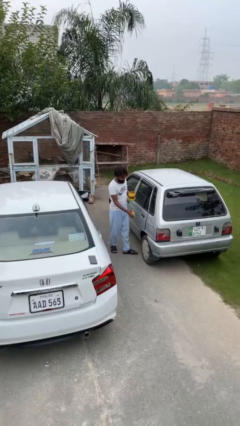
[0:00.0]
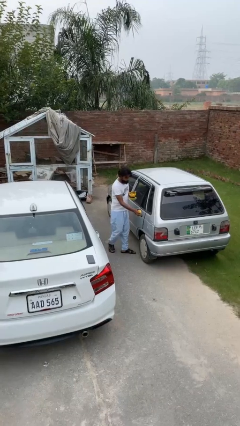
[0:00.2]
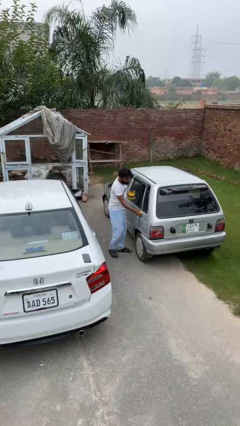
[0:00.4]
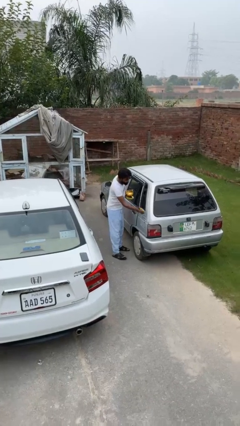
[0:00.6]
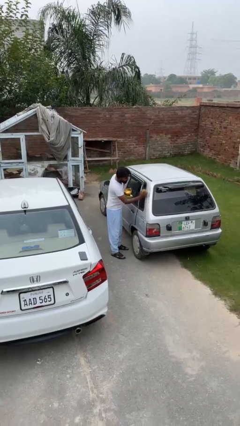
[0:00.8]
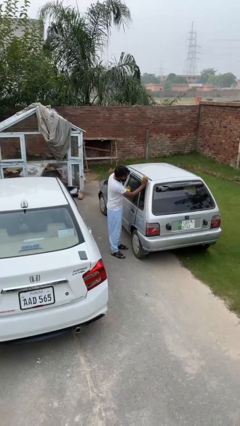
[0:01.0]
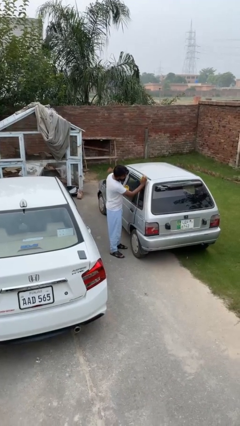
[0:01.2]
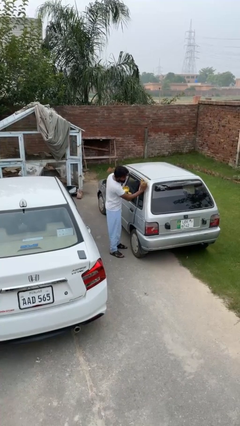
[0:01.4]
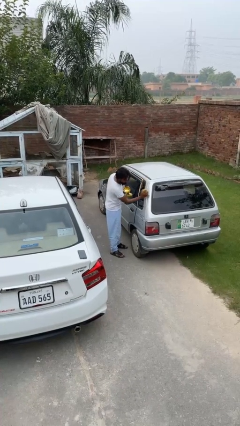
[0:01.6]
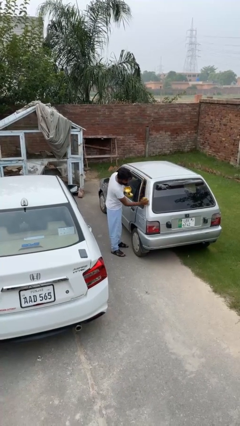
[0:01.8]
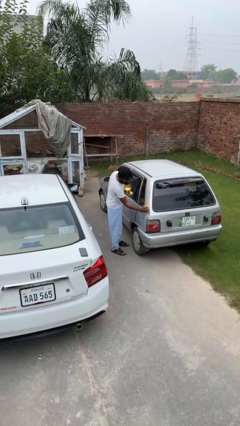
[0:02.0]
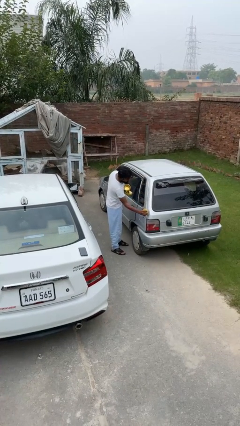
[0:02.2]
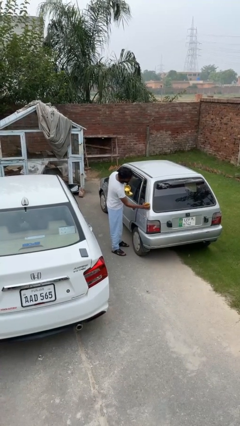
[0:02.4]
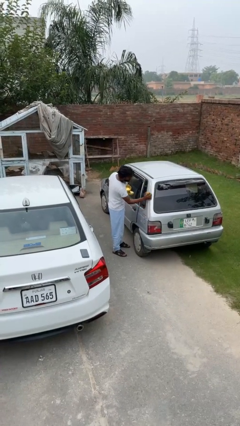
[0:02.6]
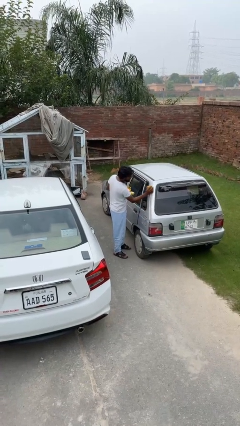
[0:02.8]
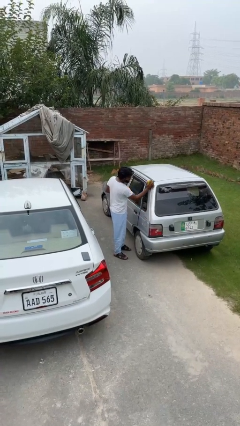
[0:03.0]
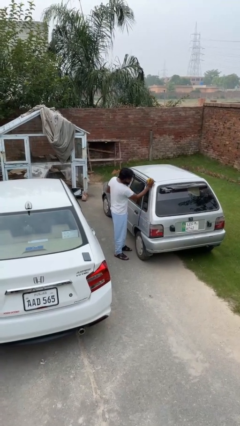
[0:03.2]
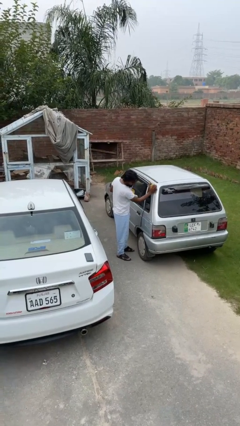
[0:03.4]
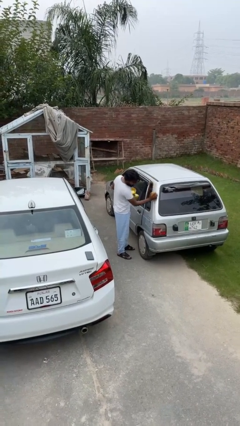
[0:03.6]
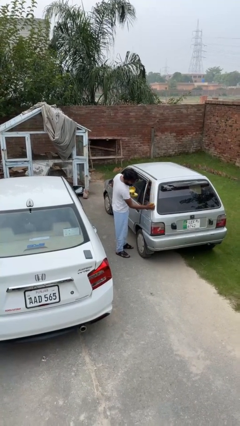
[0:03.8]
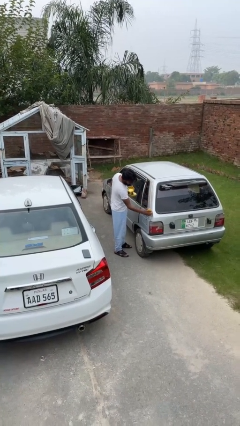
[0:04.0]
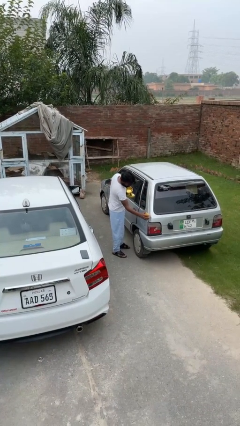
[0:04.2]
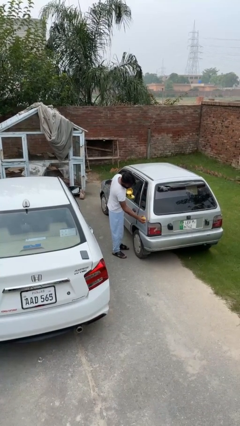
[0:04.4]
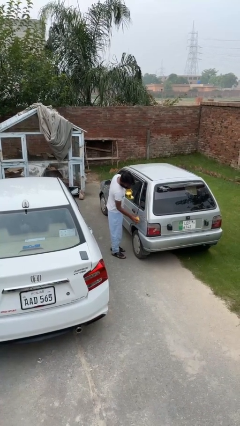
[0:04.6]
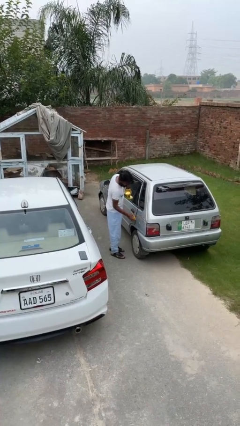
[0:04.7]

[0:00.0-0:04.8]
person polishes car with rag

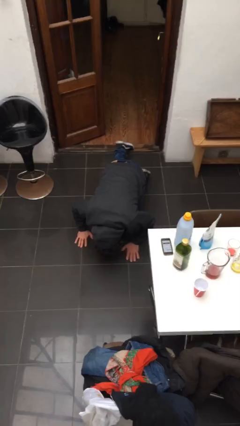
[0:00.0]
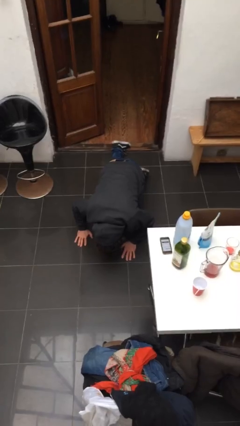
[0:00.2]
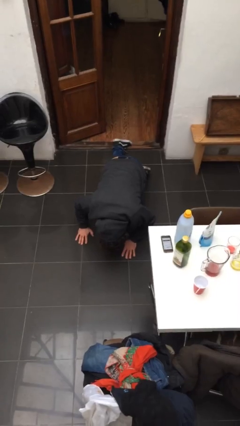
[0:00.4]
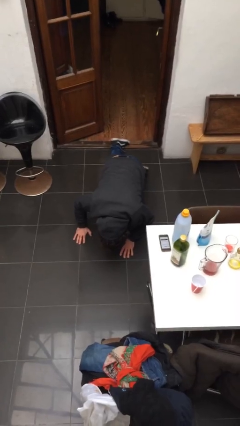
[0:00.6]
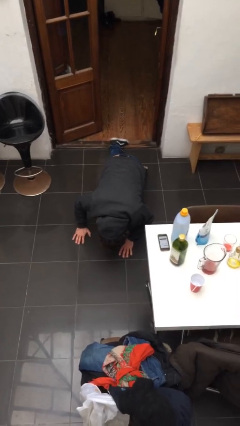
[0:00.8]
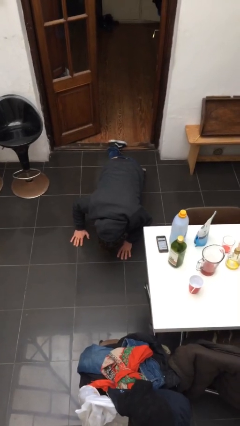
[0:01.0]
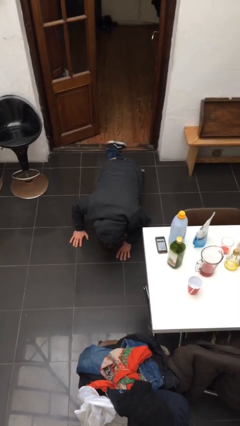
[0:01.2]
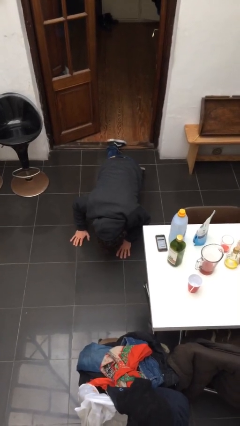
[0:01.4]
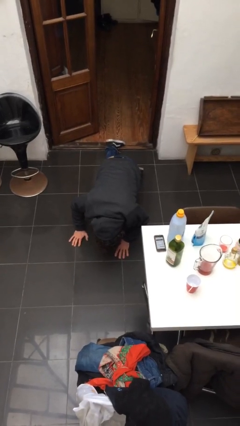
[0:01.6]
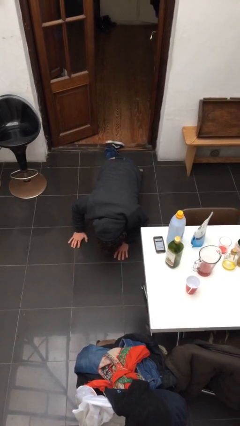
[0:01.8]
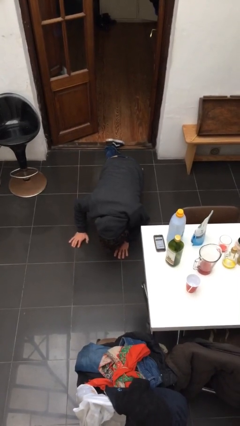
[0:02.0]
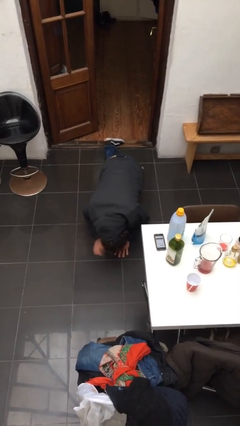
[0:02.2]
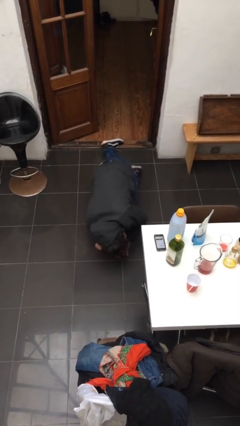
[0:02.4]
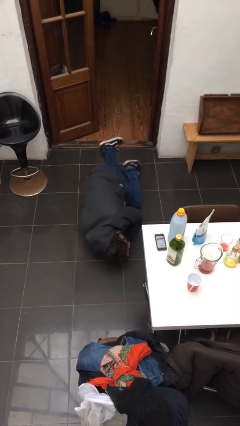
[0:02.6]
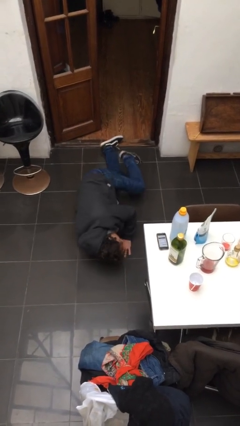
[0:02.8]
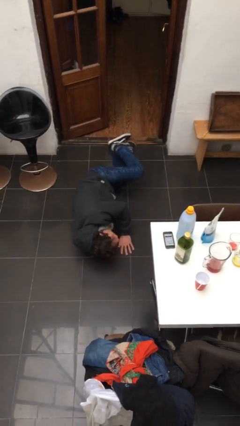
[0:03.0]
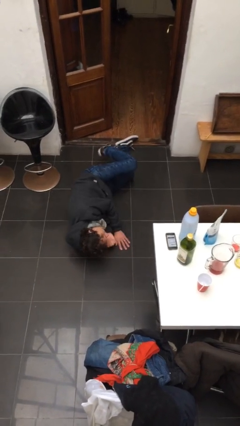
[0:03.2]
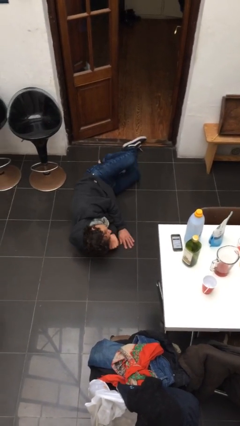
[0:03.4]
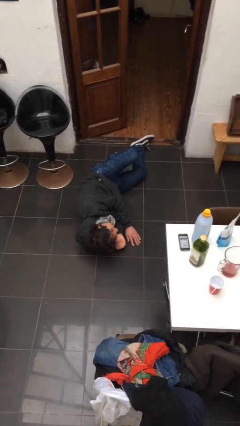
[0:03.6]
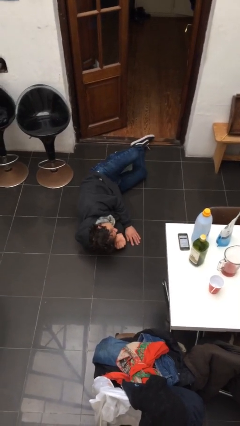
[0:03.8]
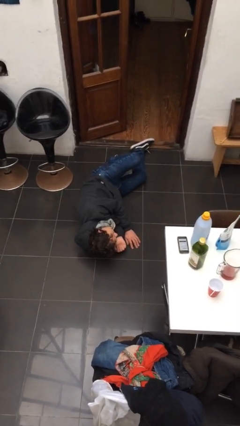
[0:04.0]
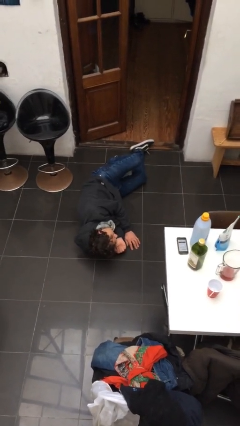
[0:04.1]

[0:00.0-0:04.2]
person lies down on floor

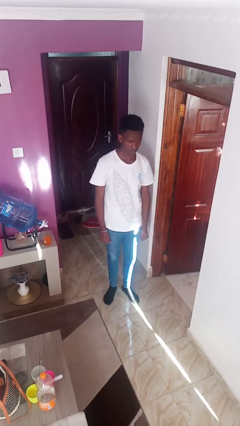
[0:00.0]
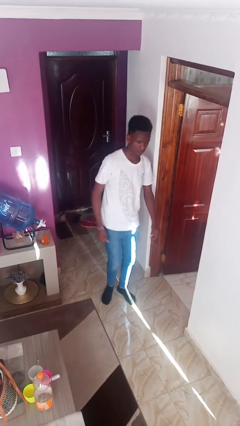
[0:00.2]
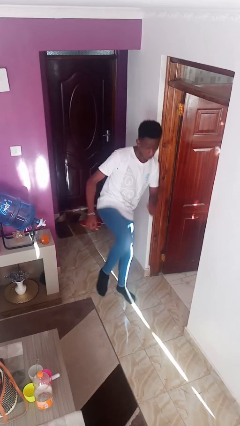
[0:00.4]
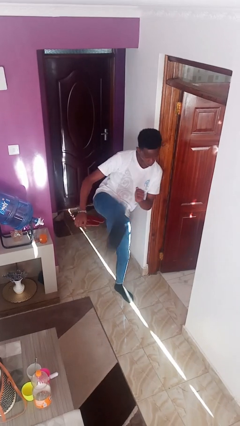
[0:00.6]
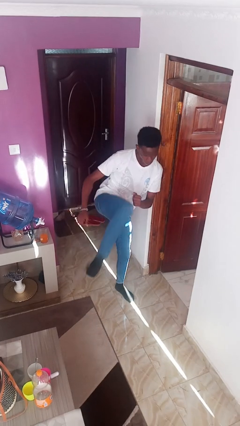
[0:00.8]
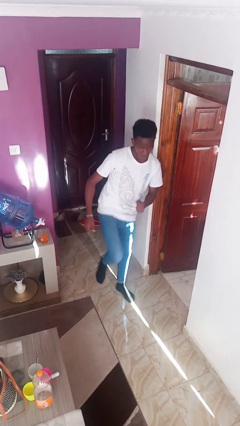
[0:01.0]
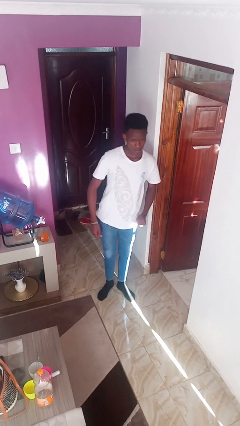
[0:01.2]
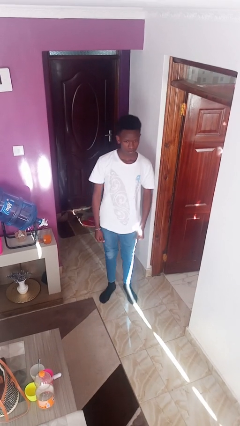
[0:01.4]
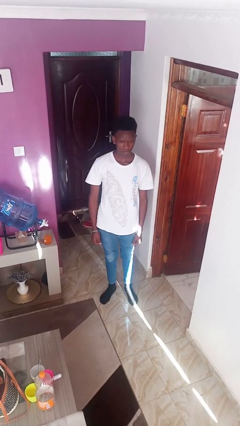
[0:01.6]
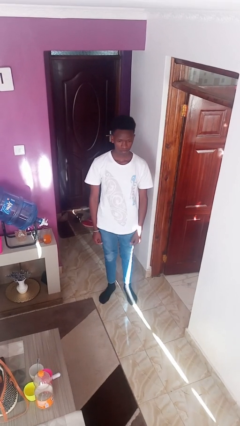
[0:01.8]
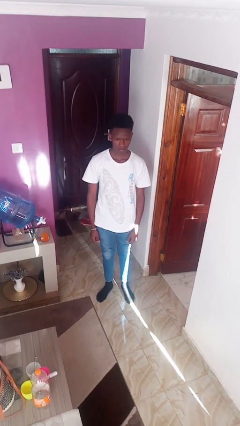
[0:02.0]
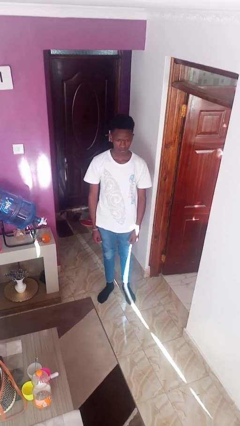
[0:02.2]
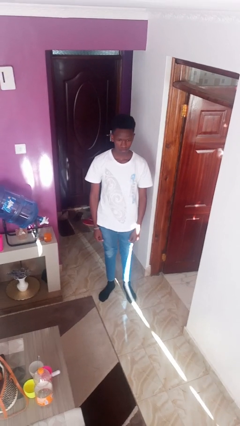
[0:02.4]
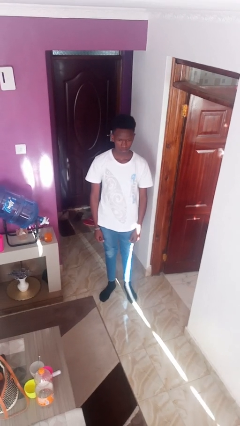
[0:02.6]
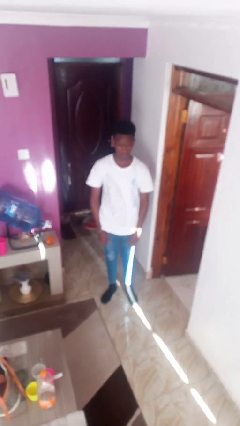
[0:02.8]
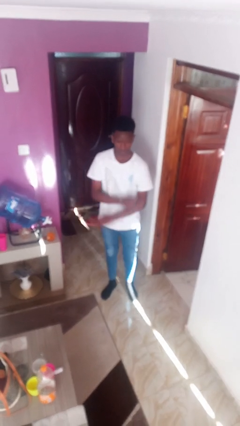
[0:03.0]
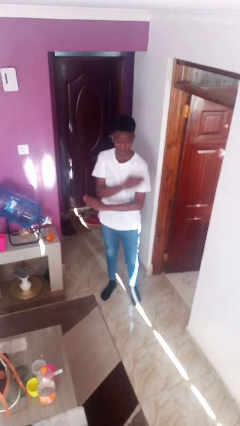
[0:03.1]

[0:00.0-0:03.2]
person karate kicks

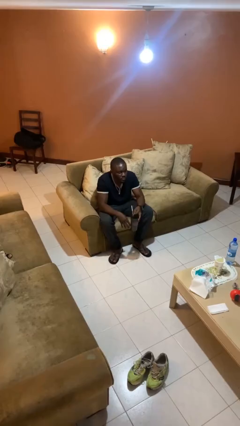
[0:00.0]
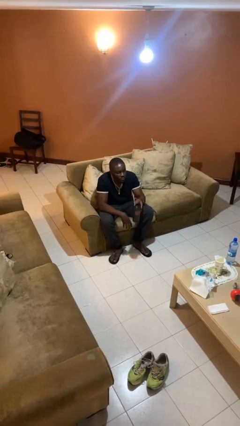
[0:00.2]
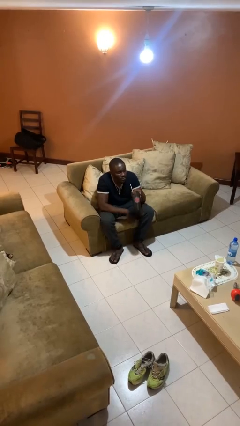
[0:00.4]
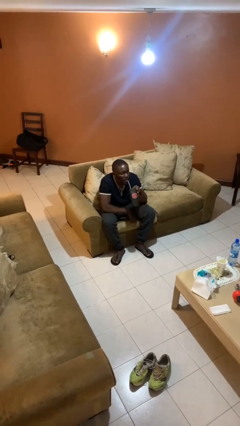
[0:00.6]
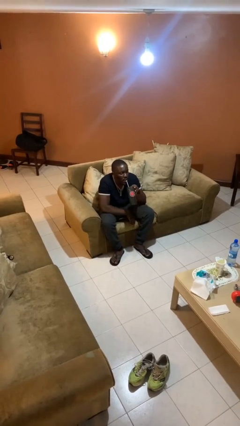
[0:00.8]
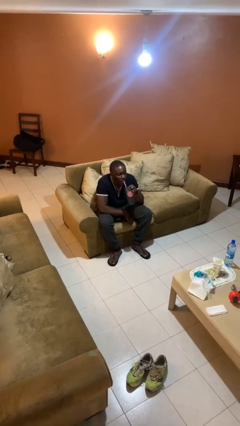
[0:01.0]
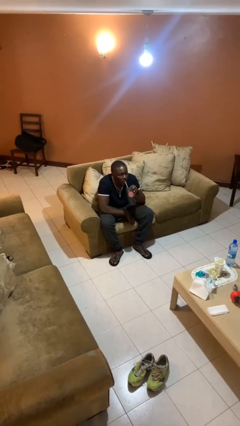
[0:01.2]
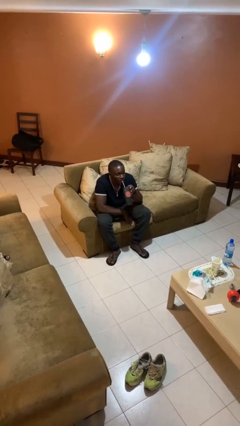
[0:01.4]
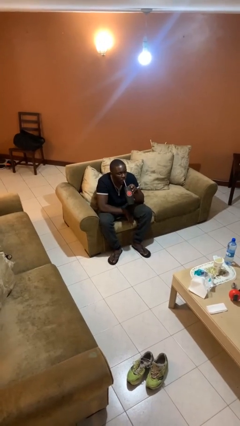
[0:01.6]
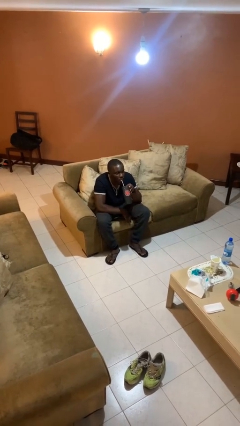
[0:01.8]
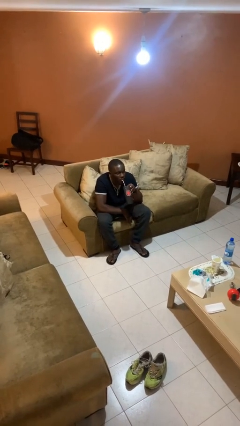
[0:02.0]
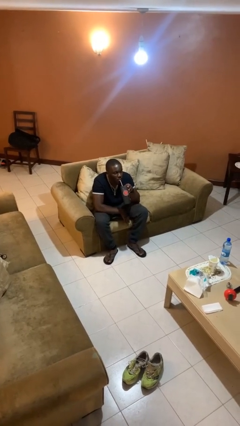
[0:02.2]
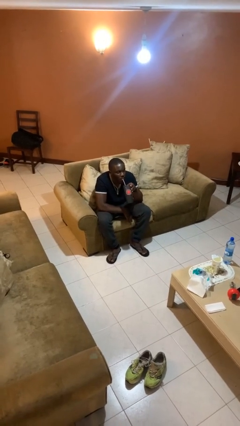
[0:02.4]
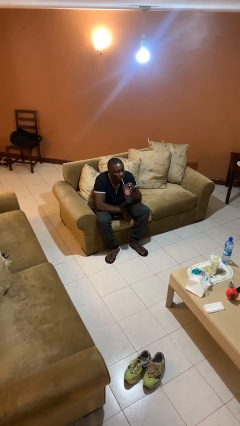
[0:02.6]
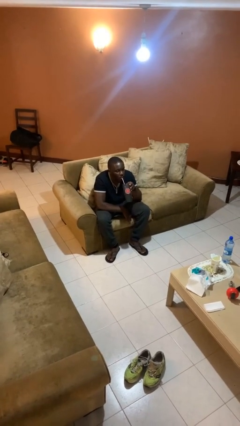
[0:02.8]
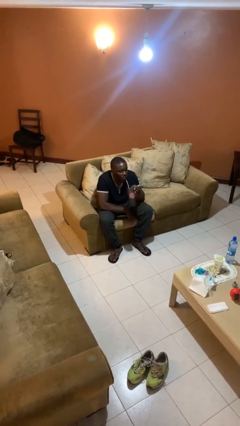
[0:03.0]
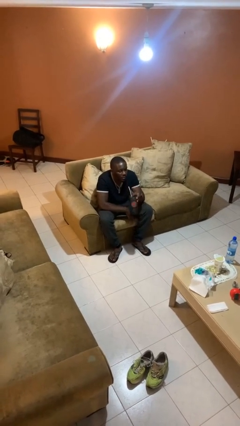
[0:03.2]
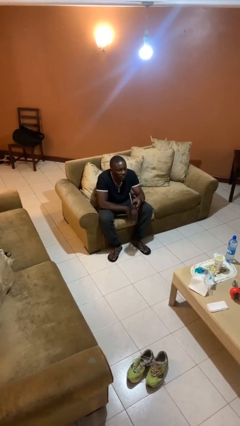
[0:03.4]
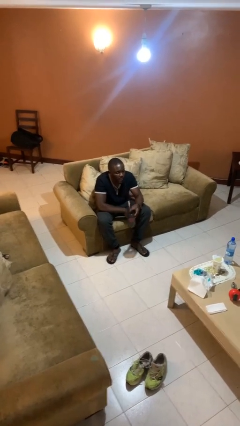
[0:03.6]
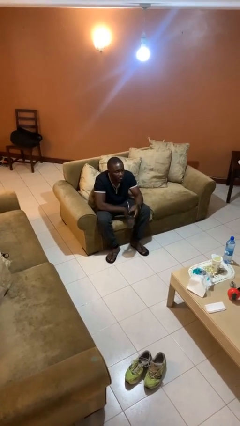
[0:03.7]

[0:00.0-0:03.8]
person drinks from straw

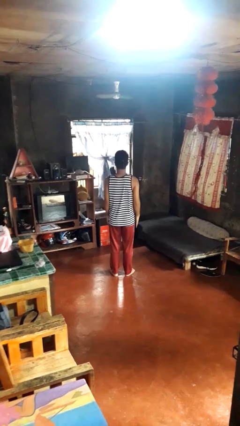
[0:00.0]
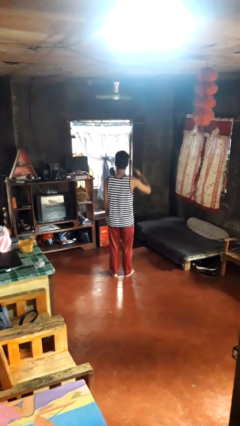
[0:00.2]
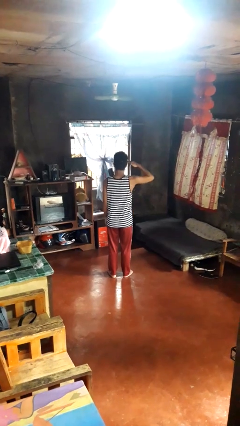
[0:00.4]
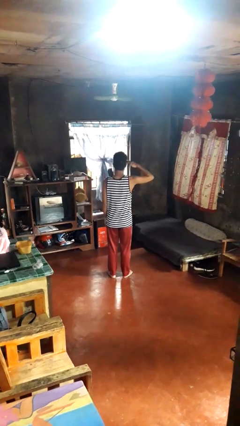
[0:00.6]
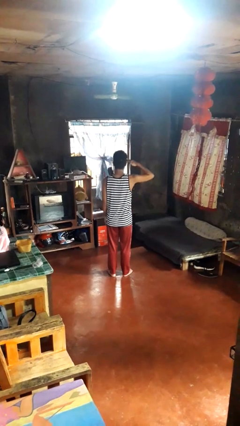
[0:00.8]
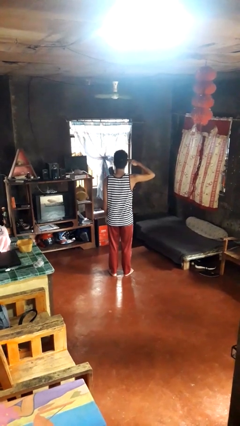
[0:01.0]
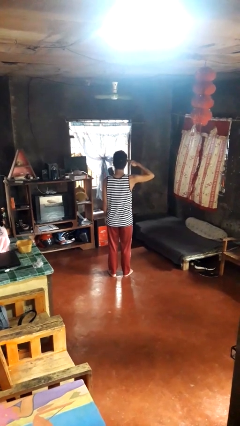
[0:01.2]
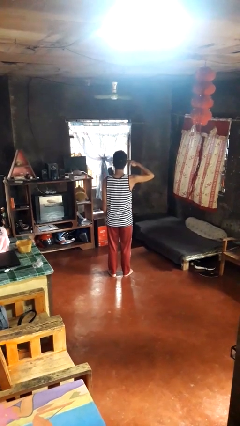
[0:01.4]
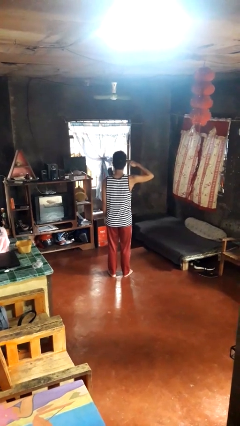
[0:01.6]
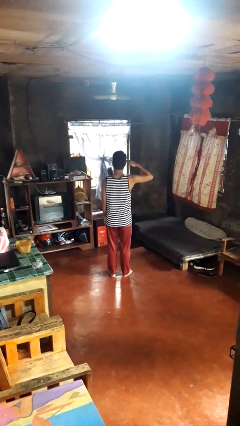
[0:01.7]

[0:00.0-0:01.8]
person salutes

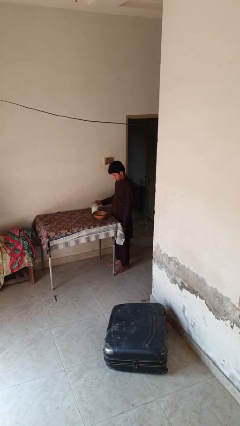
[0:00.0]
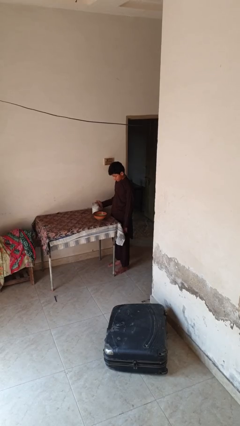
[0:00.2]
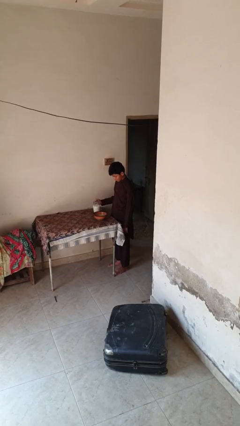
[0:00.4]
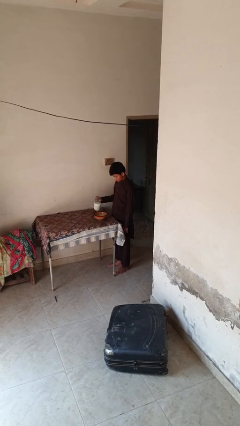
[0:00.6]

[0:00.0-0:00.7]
person pours into bowl
